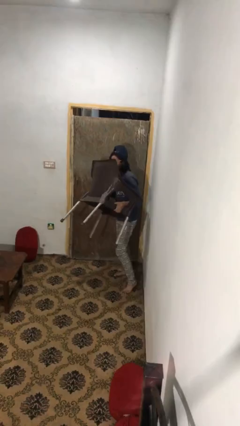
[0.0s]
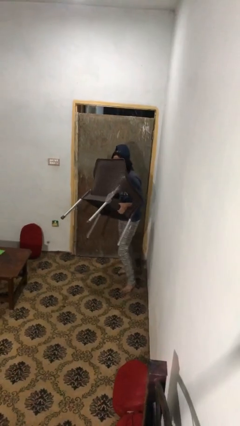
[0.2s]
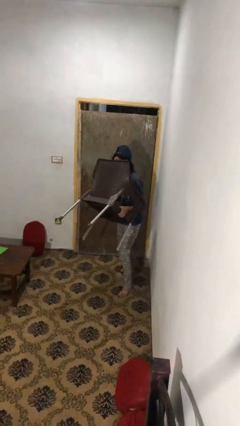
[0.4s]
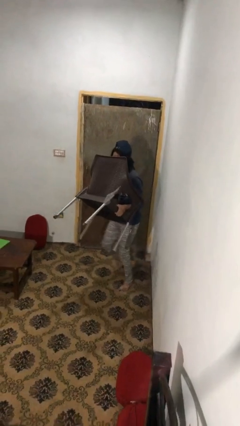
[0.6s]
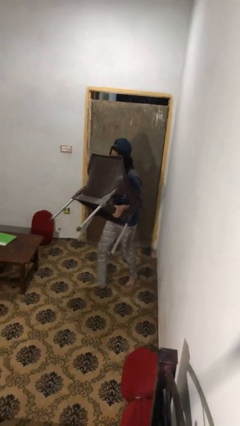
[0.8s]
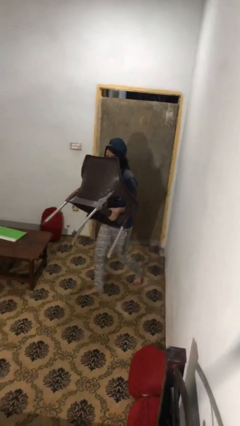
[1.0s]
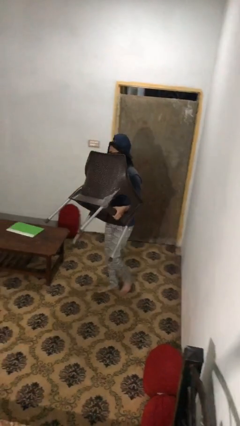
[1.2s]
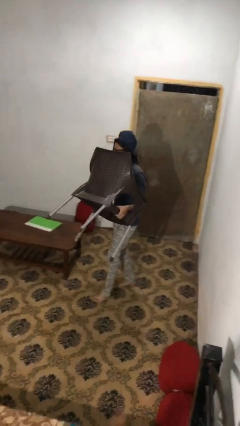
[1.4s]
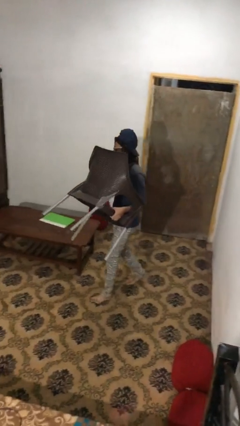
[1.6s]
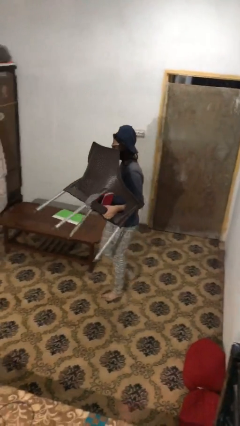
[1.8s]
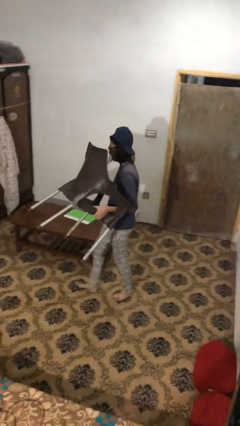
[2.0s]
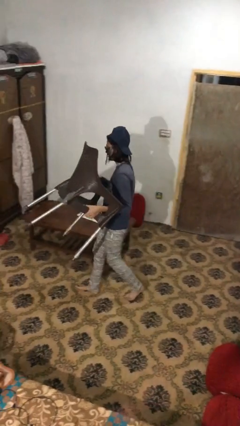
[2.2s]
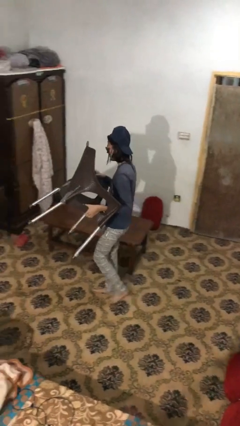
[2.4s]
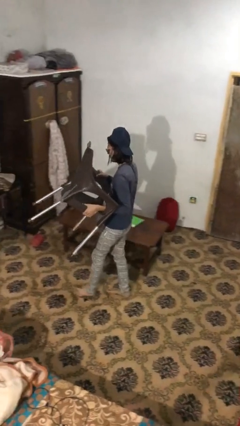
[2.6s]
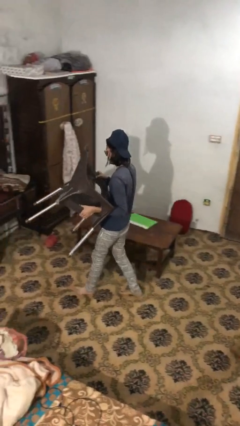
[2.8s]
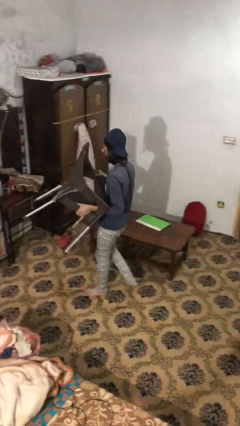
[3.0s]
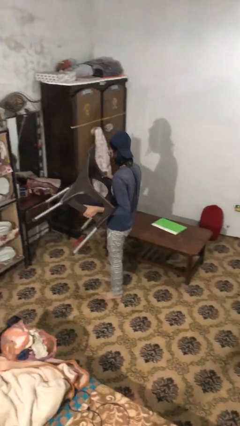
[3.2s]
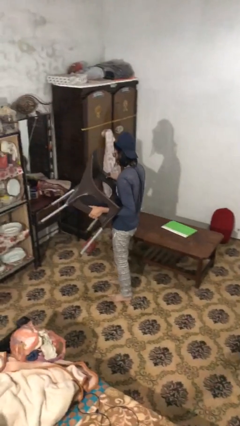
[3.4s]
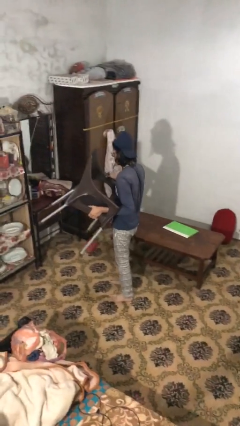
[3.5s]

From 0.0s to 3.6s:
person carries heavy object

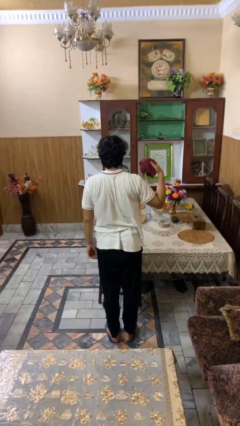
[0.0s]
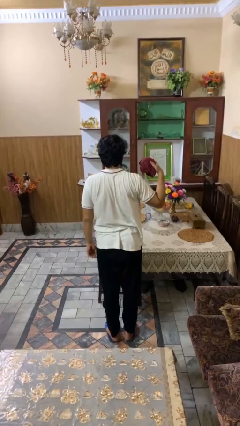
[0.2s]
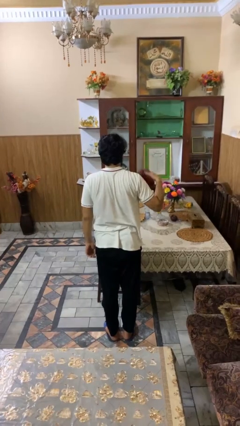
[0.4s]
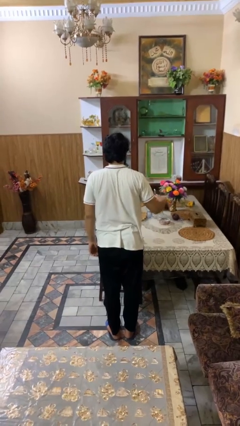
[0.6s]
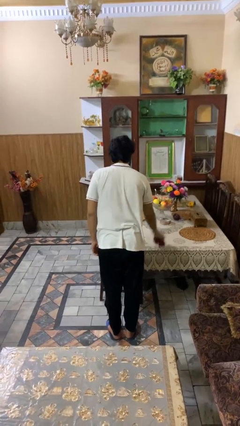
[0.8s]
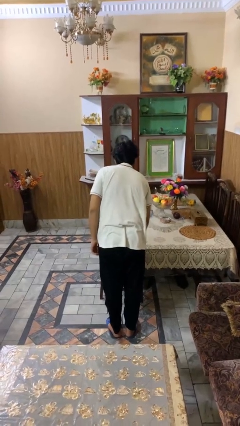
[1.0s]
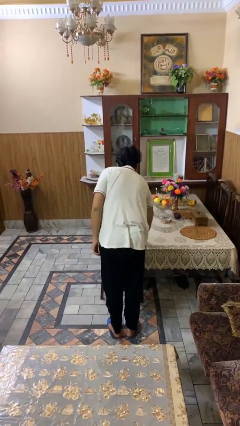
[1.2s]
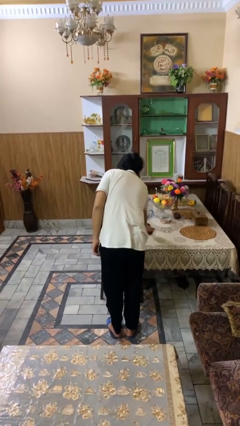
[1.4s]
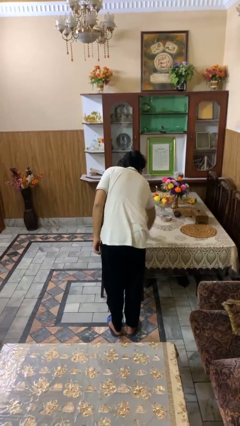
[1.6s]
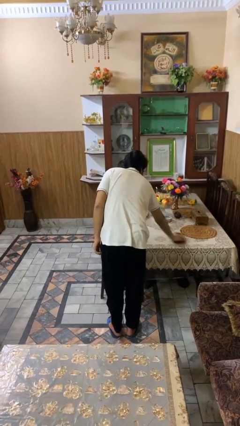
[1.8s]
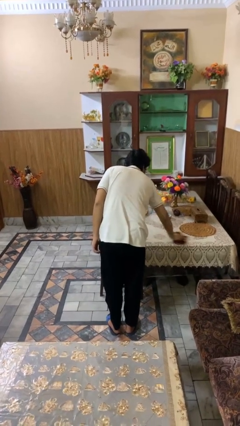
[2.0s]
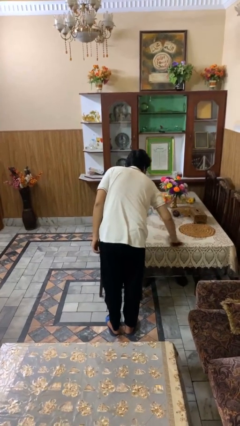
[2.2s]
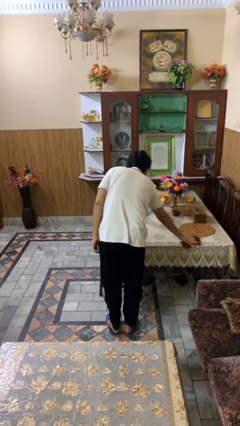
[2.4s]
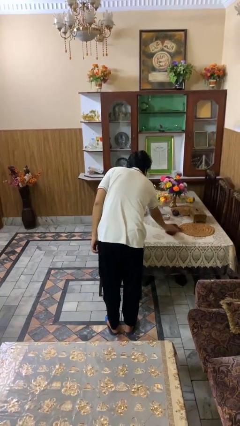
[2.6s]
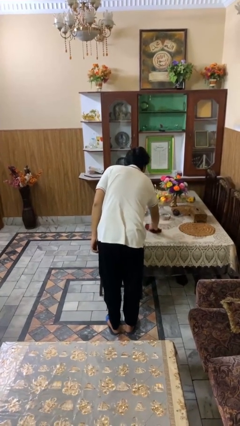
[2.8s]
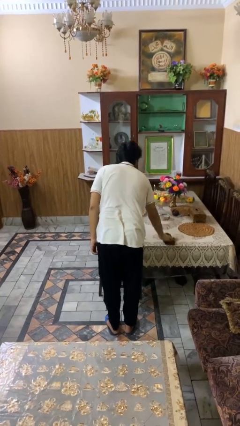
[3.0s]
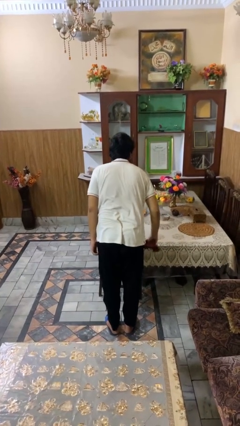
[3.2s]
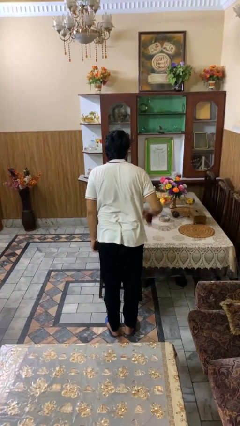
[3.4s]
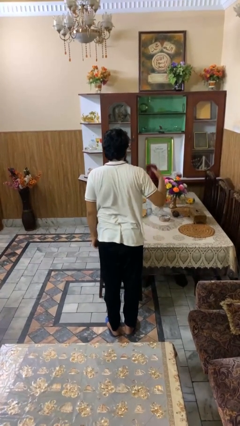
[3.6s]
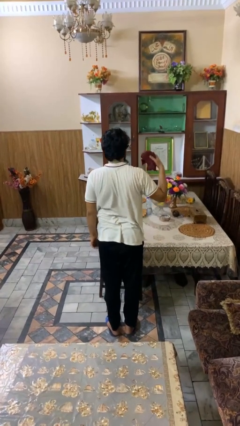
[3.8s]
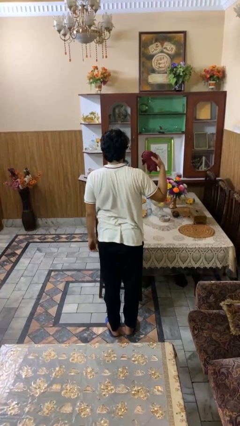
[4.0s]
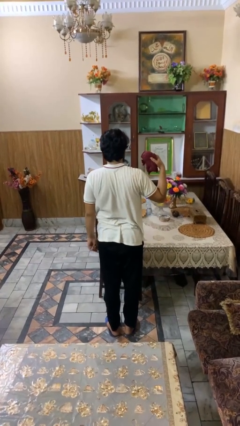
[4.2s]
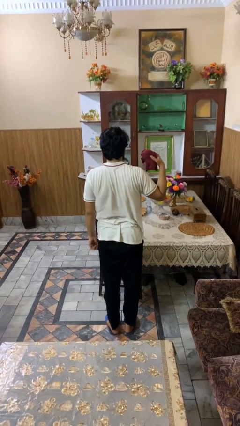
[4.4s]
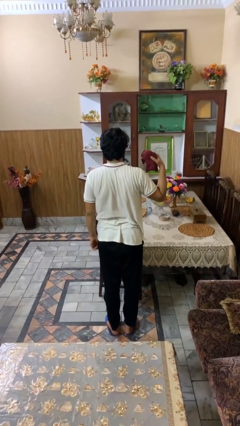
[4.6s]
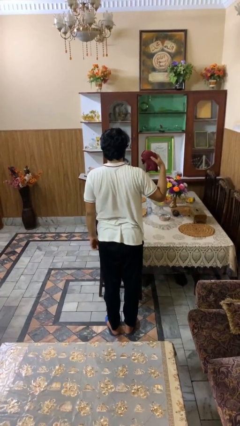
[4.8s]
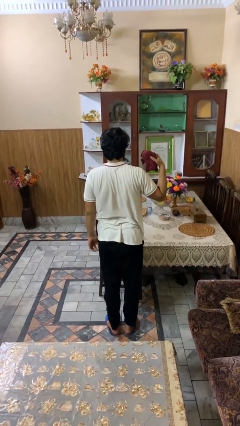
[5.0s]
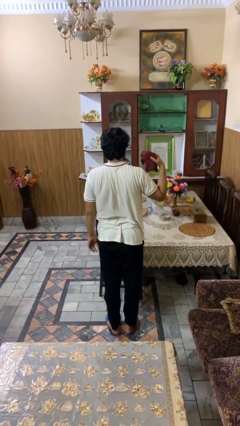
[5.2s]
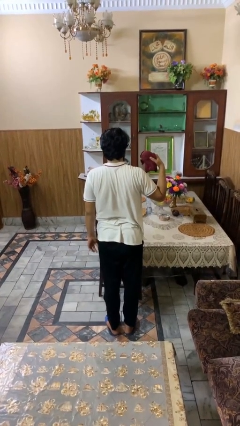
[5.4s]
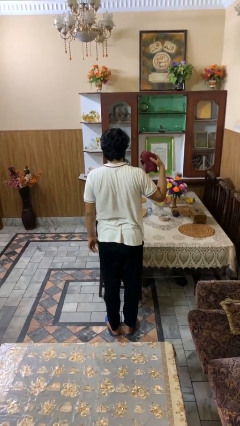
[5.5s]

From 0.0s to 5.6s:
person cleans table with rag

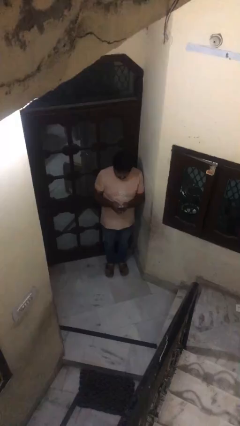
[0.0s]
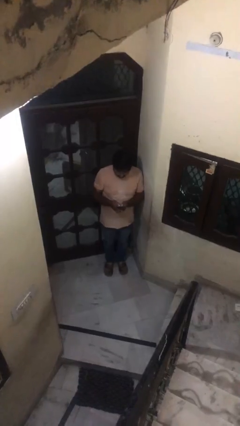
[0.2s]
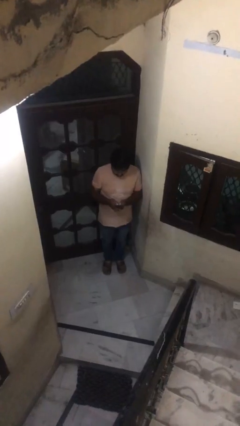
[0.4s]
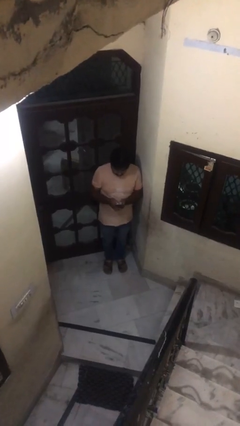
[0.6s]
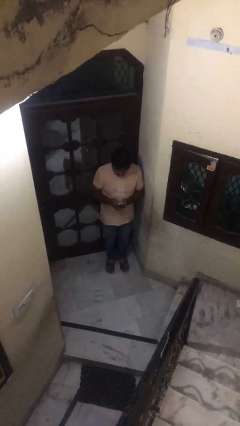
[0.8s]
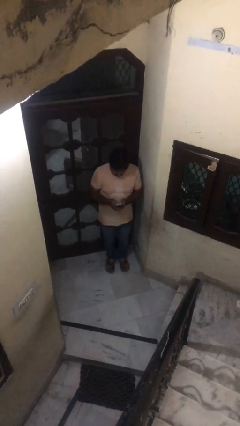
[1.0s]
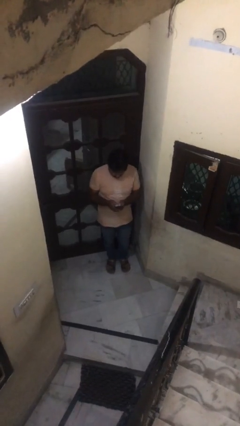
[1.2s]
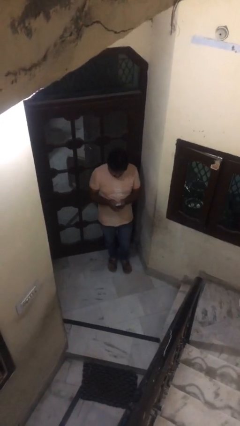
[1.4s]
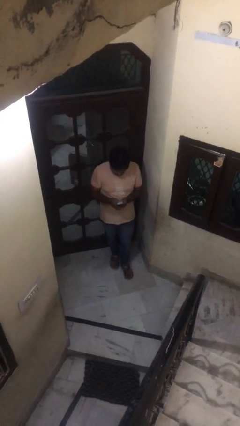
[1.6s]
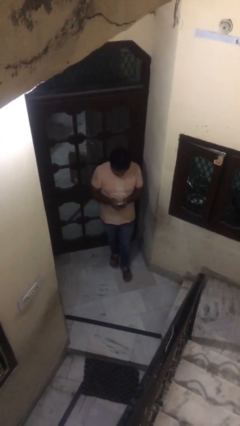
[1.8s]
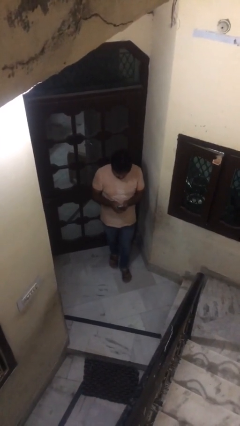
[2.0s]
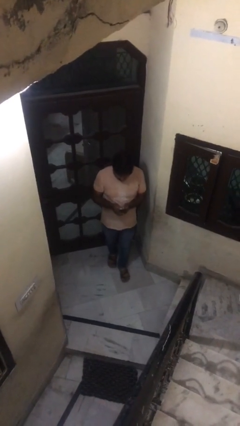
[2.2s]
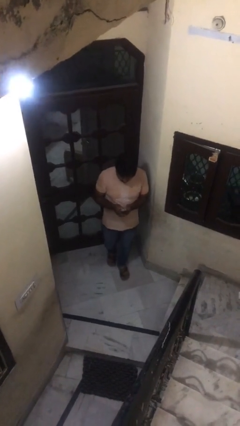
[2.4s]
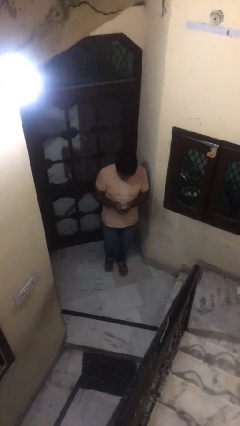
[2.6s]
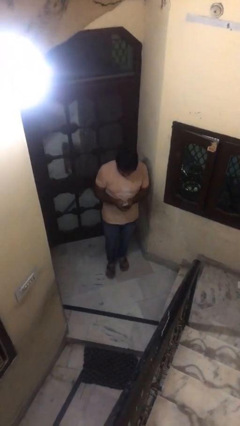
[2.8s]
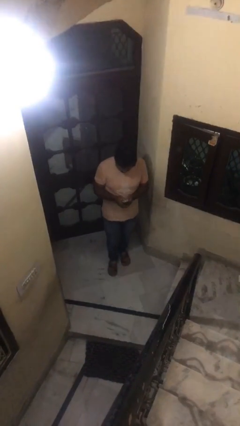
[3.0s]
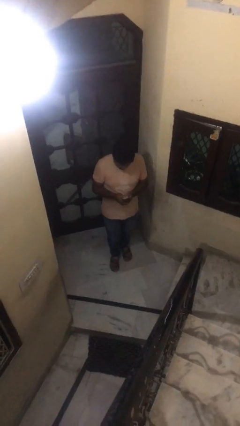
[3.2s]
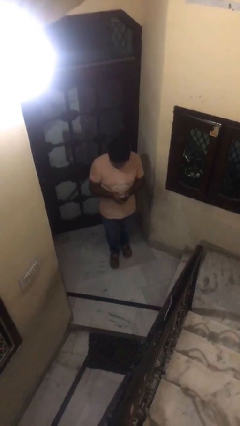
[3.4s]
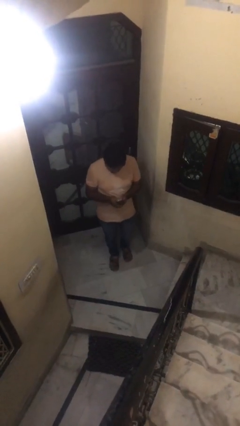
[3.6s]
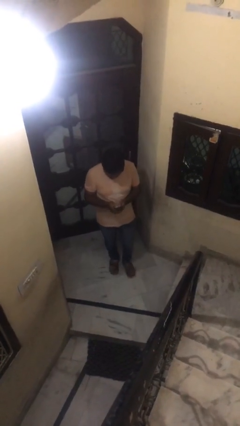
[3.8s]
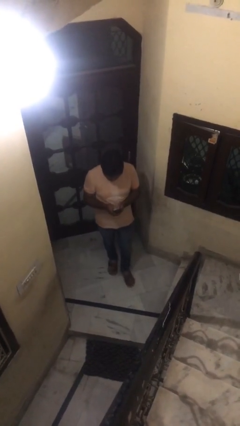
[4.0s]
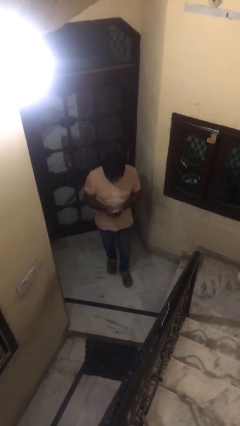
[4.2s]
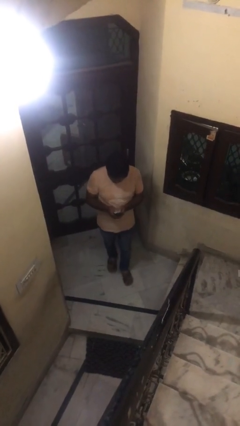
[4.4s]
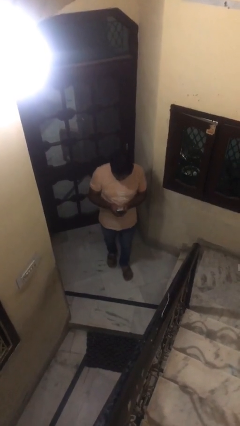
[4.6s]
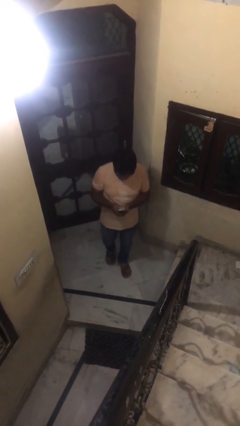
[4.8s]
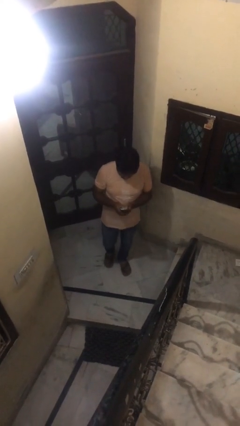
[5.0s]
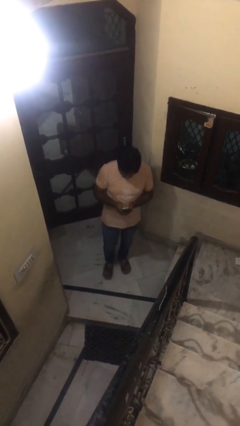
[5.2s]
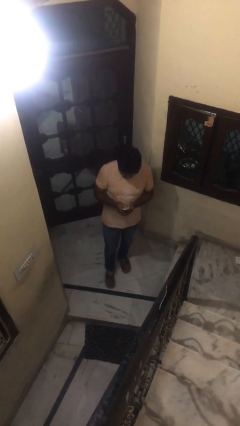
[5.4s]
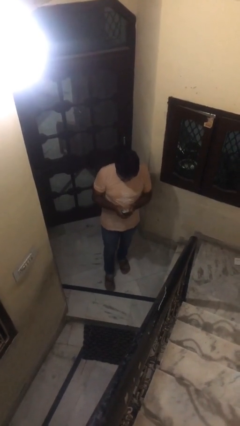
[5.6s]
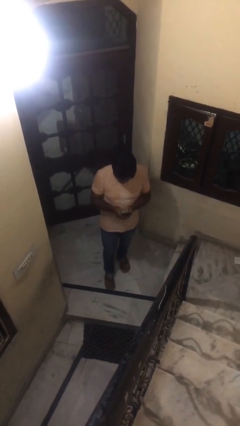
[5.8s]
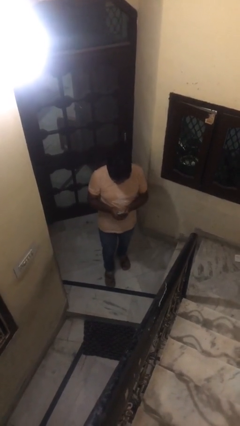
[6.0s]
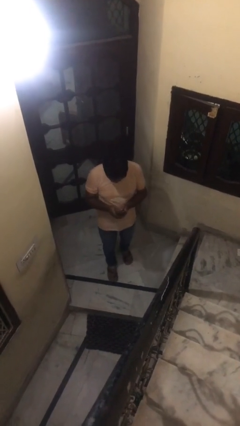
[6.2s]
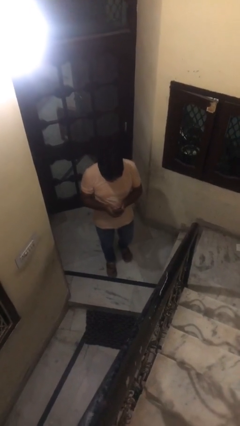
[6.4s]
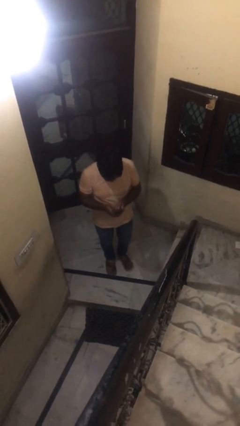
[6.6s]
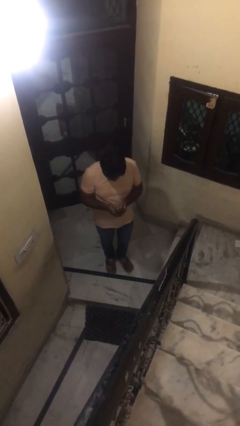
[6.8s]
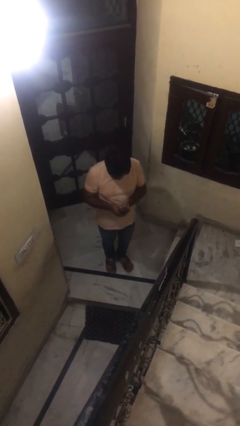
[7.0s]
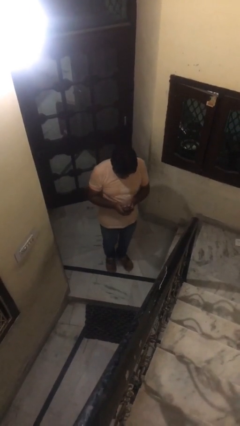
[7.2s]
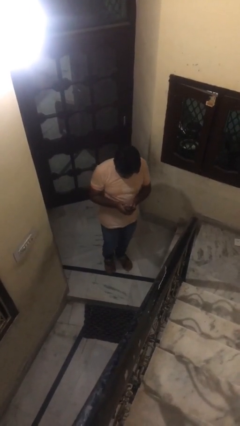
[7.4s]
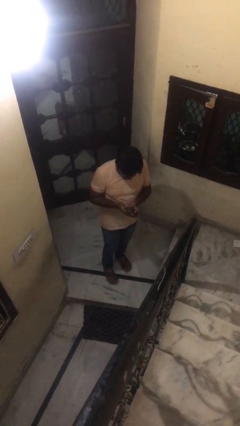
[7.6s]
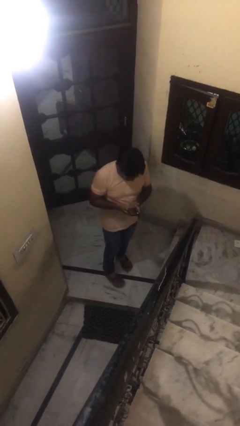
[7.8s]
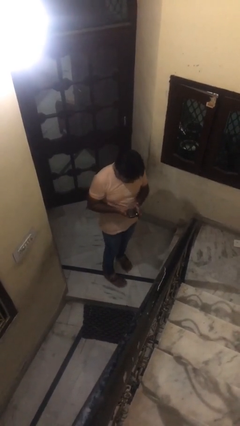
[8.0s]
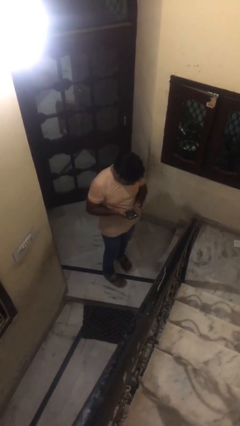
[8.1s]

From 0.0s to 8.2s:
person texts on phone

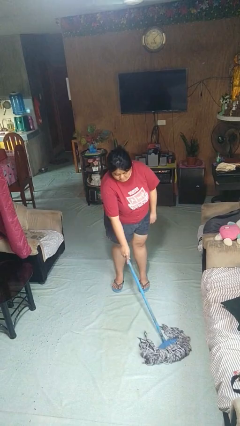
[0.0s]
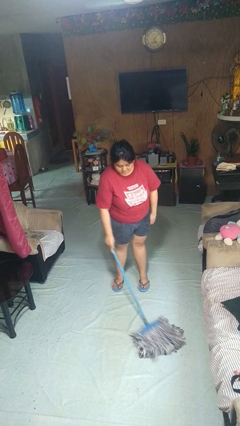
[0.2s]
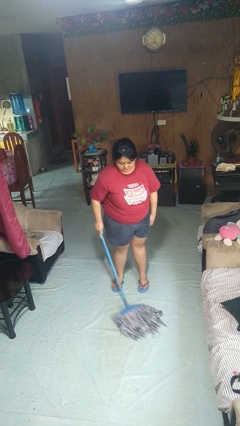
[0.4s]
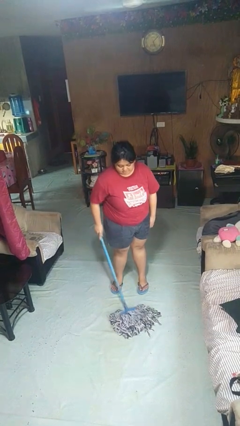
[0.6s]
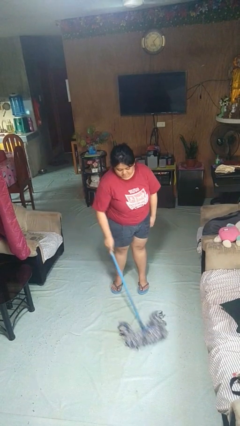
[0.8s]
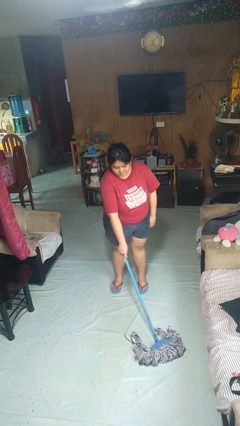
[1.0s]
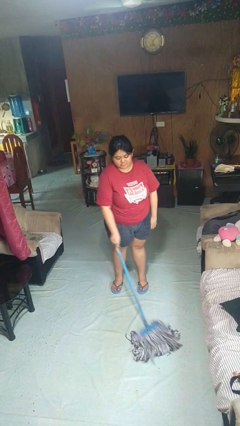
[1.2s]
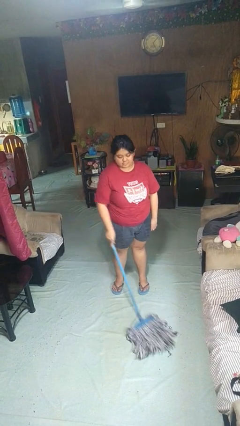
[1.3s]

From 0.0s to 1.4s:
person mops
